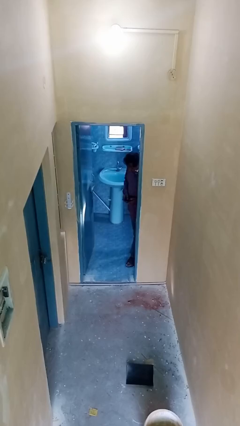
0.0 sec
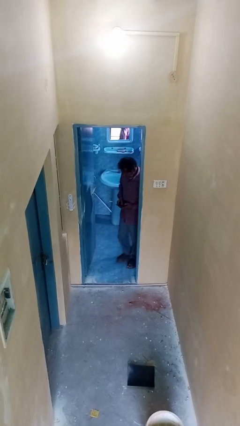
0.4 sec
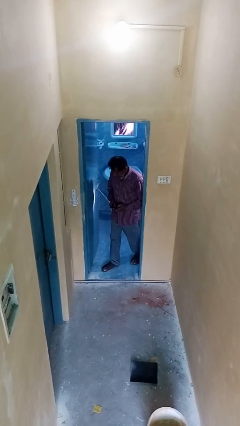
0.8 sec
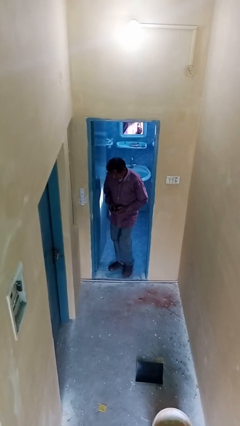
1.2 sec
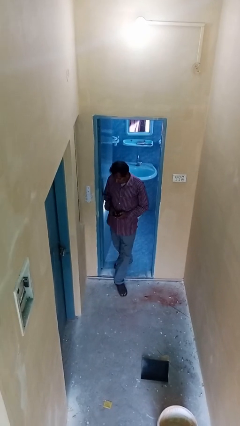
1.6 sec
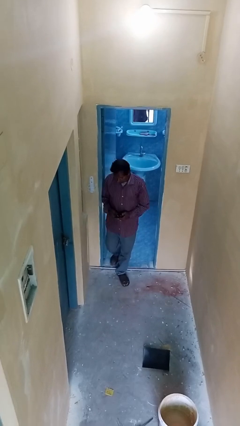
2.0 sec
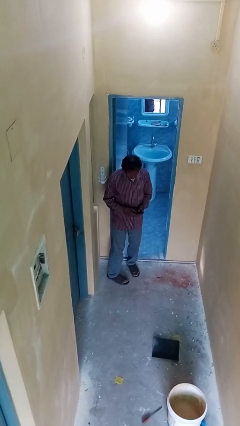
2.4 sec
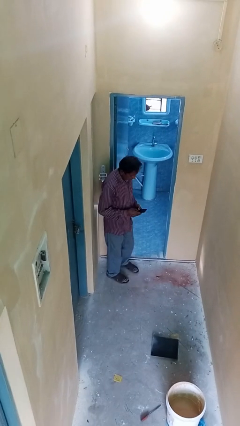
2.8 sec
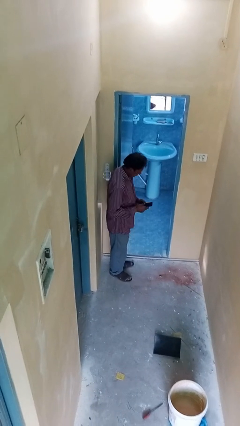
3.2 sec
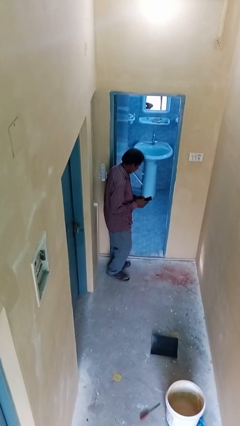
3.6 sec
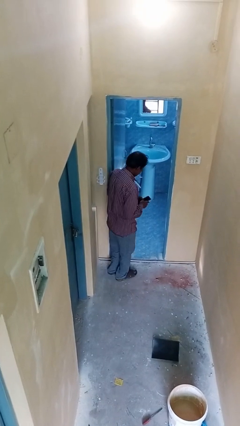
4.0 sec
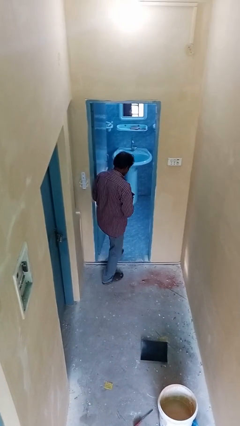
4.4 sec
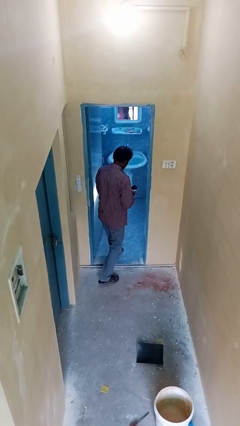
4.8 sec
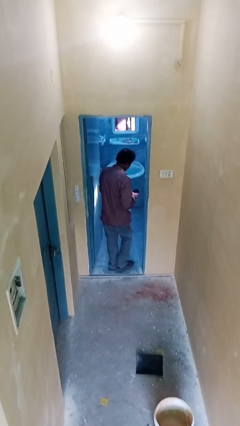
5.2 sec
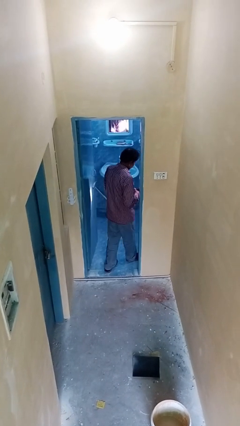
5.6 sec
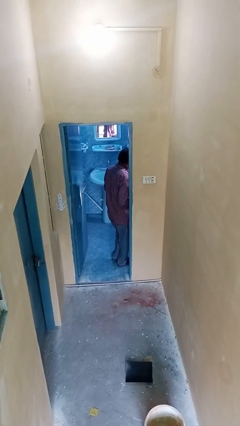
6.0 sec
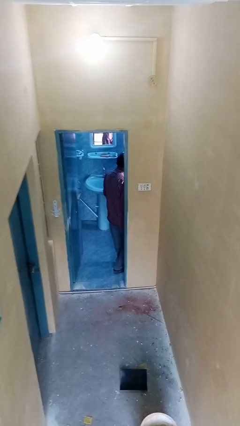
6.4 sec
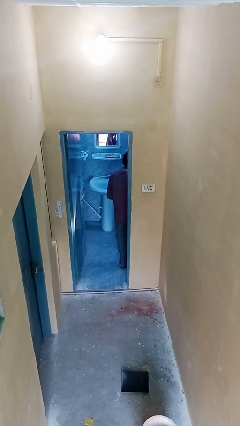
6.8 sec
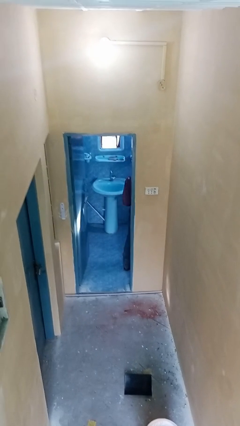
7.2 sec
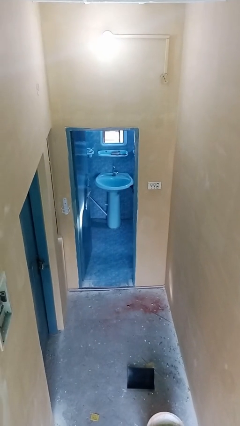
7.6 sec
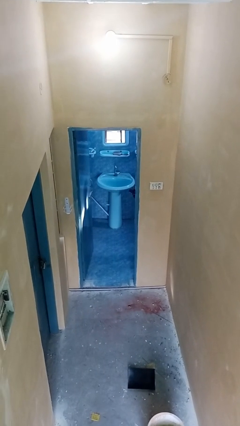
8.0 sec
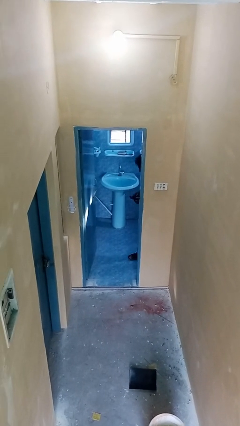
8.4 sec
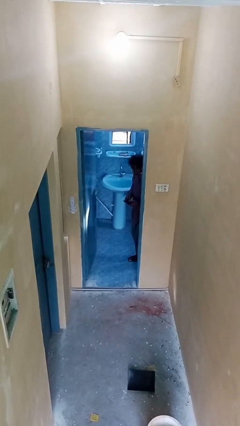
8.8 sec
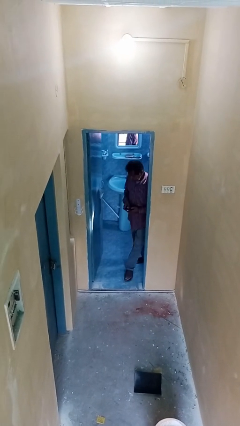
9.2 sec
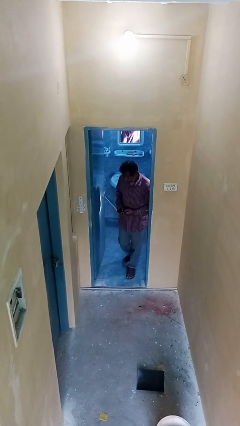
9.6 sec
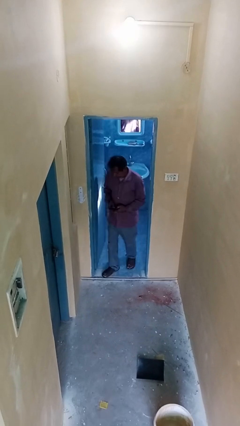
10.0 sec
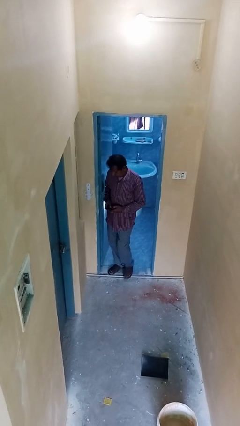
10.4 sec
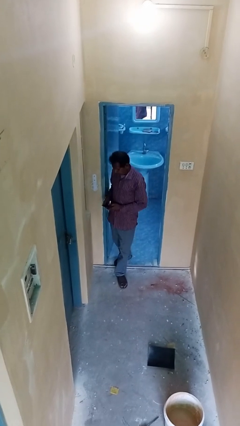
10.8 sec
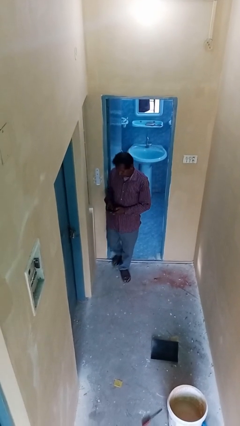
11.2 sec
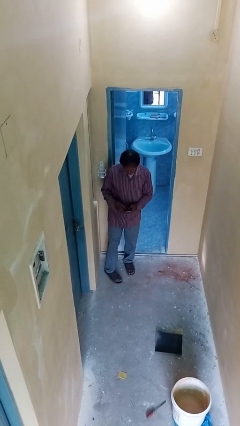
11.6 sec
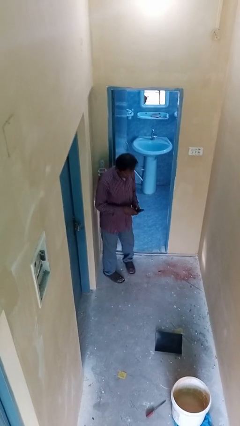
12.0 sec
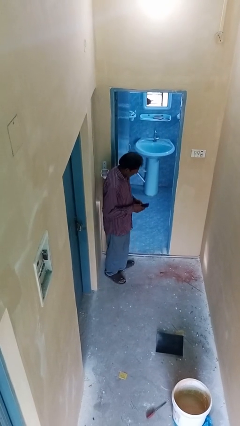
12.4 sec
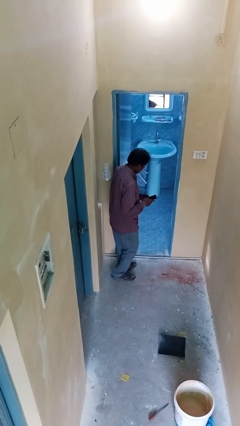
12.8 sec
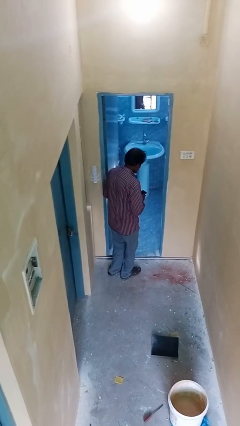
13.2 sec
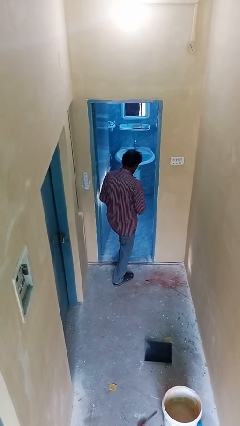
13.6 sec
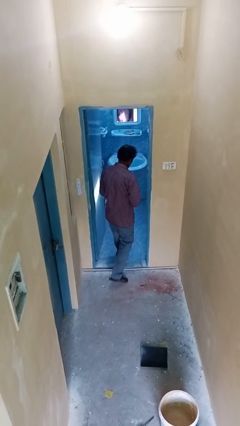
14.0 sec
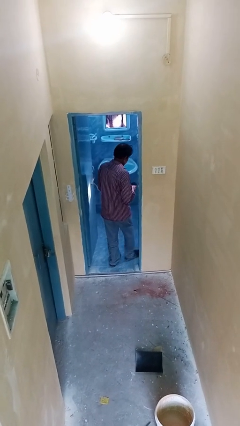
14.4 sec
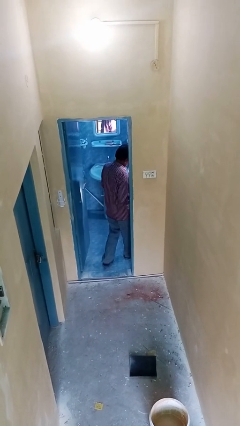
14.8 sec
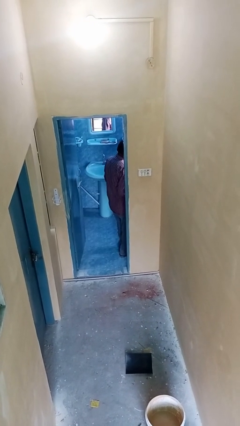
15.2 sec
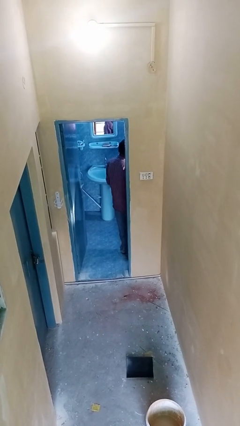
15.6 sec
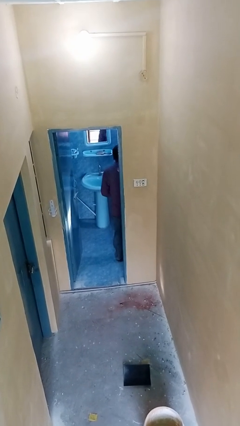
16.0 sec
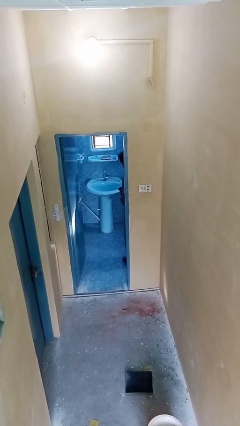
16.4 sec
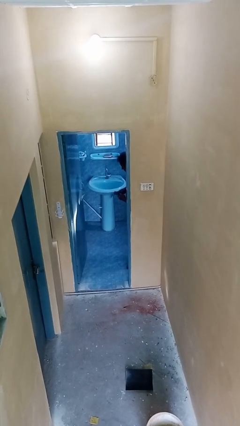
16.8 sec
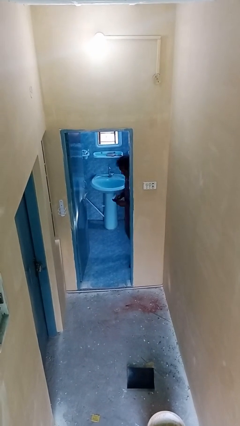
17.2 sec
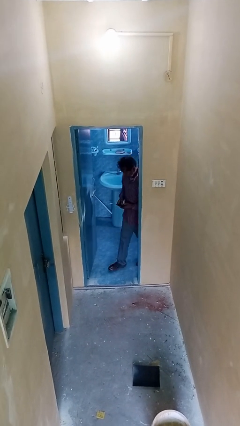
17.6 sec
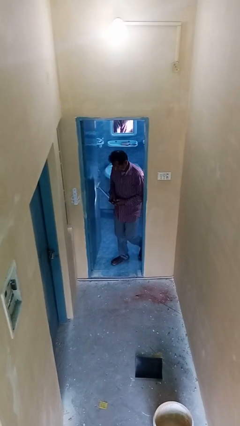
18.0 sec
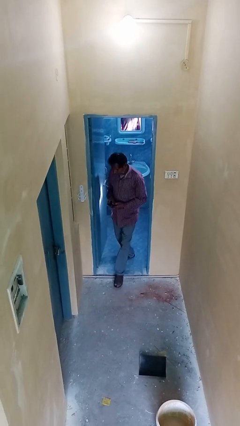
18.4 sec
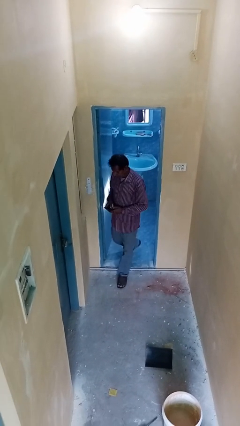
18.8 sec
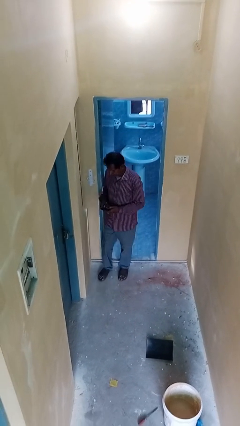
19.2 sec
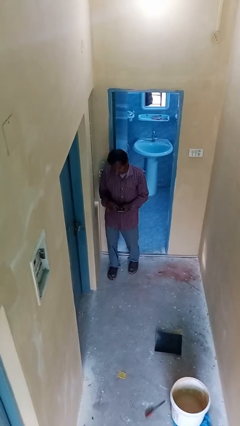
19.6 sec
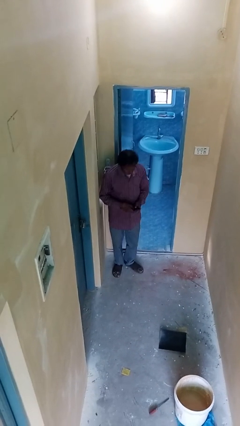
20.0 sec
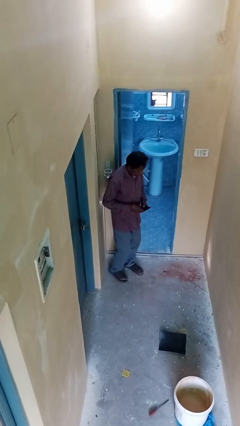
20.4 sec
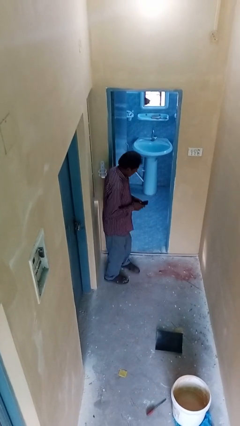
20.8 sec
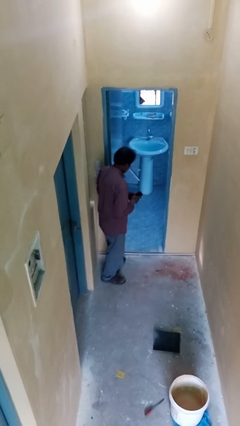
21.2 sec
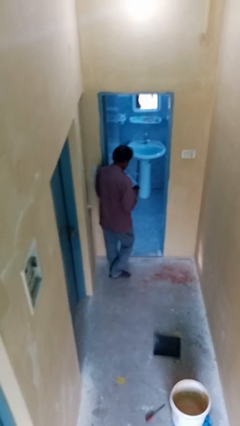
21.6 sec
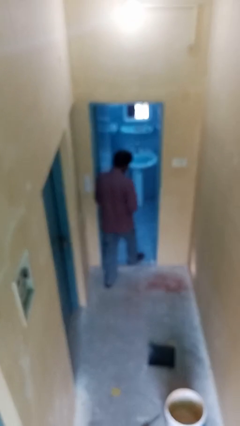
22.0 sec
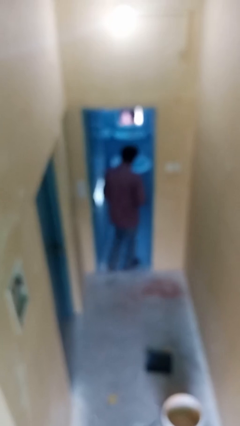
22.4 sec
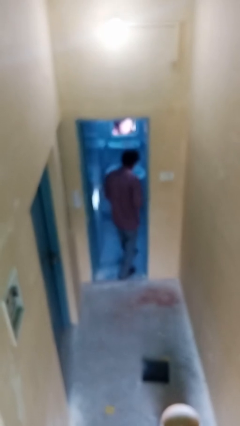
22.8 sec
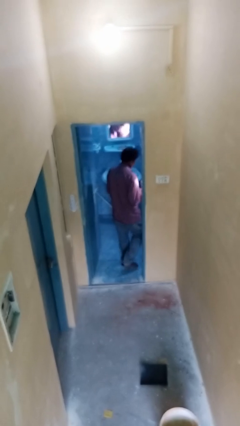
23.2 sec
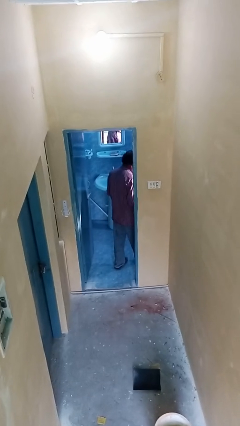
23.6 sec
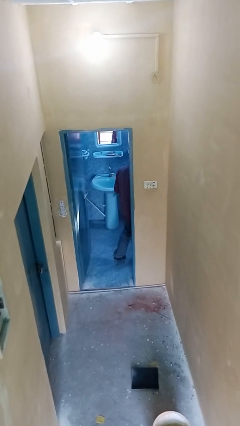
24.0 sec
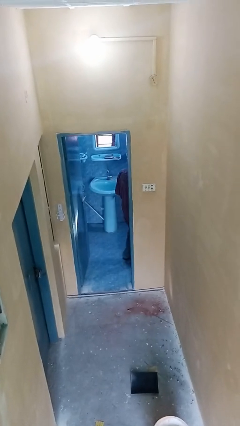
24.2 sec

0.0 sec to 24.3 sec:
person texts on phone

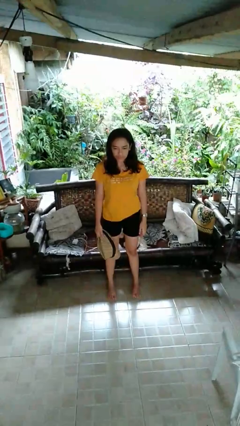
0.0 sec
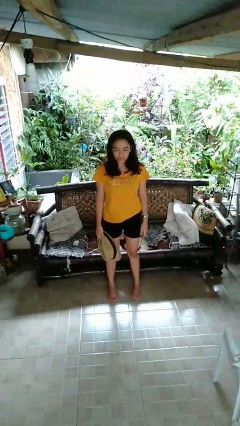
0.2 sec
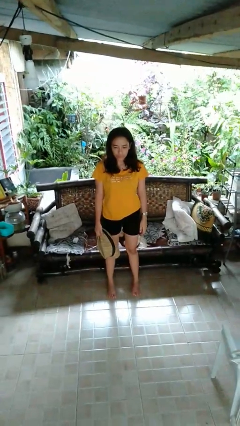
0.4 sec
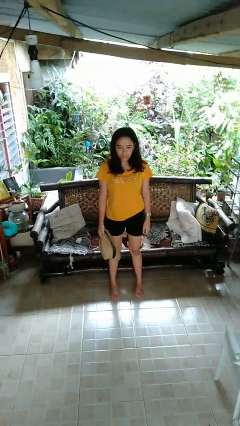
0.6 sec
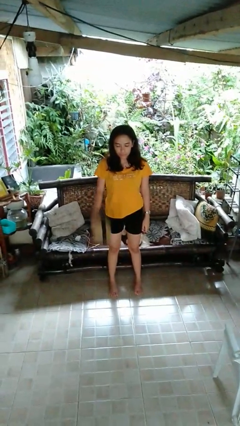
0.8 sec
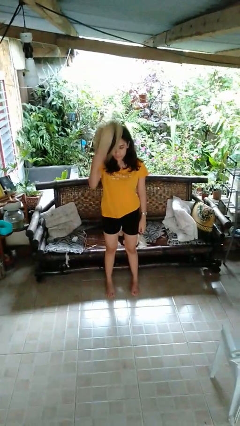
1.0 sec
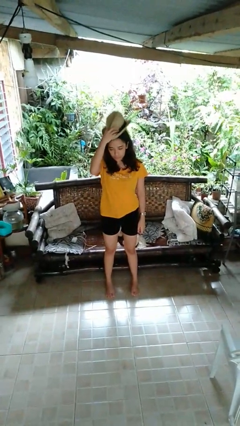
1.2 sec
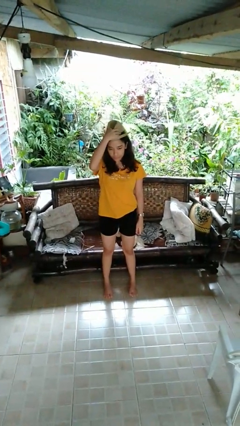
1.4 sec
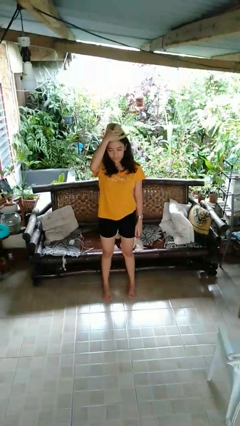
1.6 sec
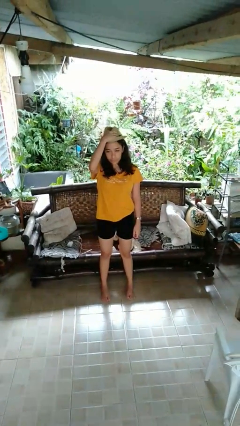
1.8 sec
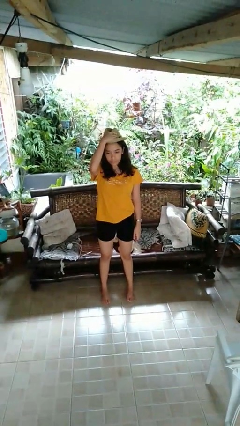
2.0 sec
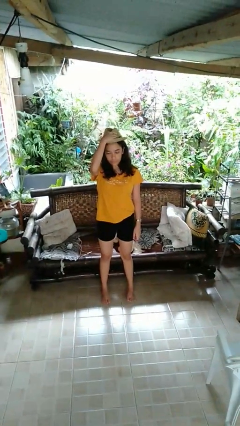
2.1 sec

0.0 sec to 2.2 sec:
person puts on hat

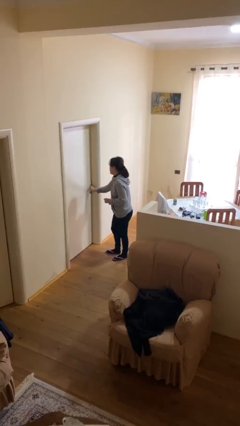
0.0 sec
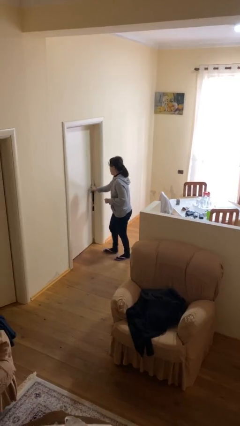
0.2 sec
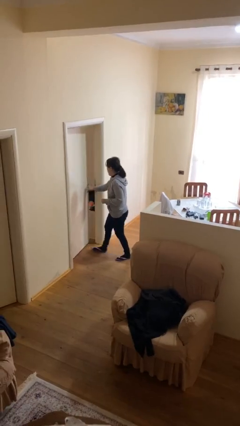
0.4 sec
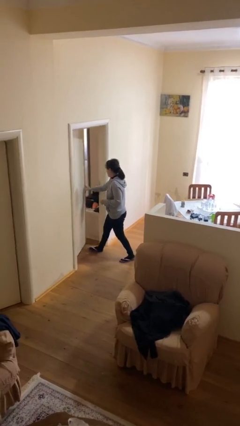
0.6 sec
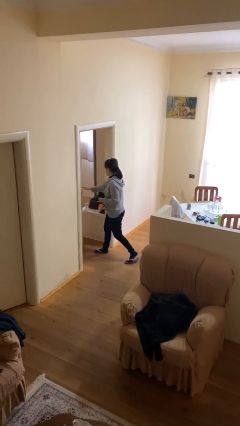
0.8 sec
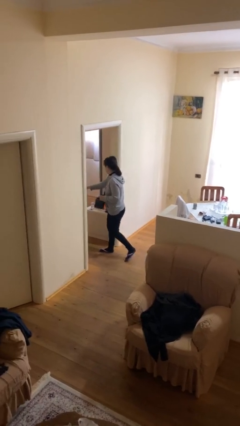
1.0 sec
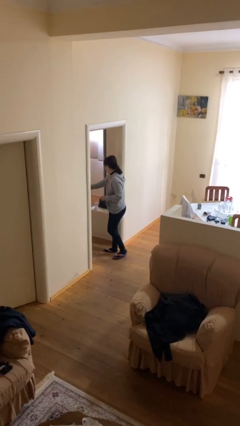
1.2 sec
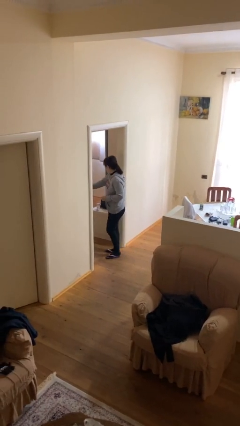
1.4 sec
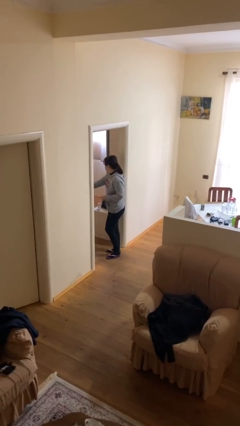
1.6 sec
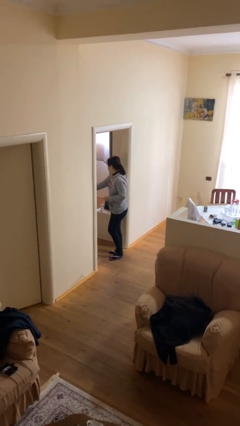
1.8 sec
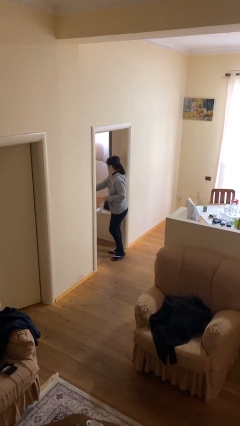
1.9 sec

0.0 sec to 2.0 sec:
person opens facility door

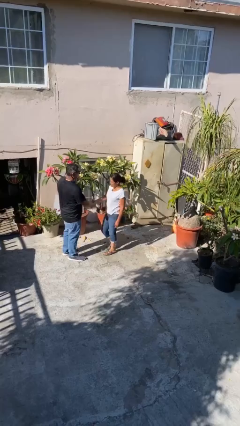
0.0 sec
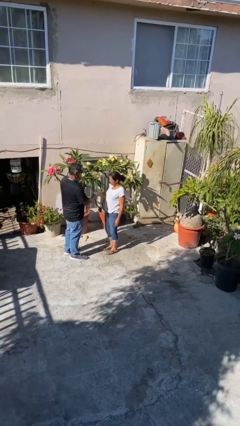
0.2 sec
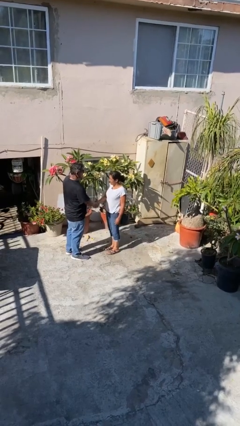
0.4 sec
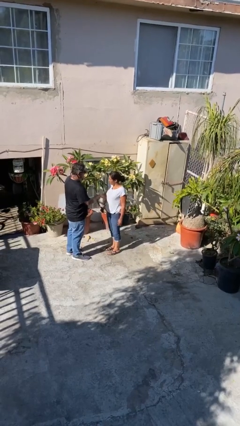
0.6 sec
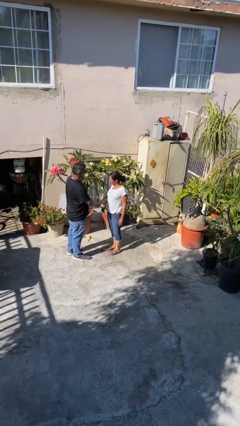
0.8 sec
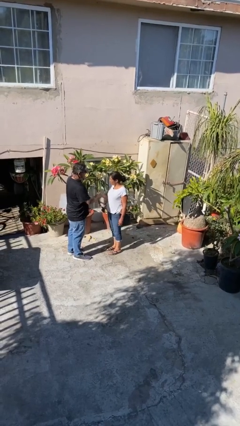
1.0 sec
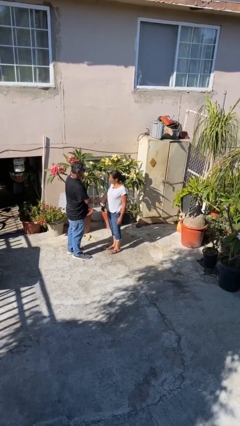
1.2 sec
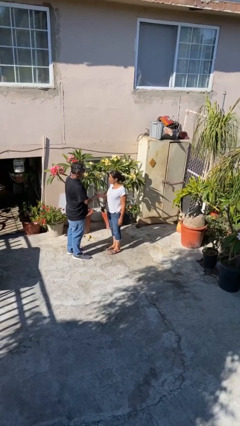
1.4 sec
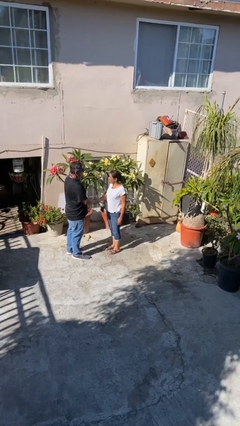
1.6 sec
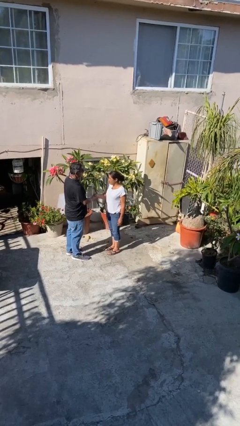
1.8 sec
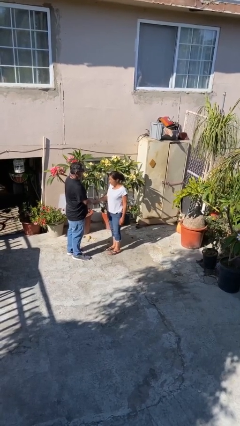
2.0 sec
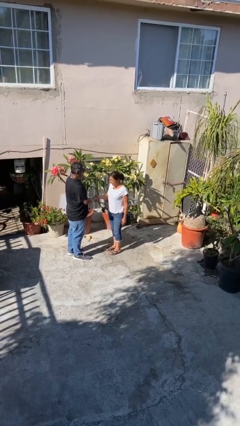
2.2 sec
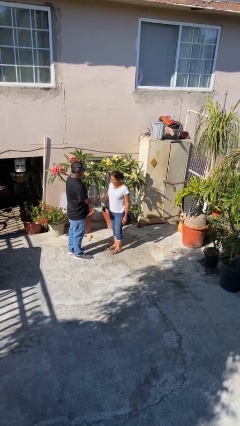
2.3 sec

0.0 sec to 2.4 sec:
person shakes hand
